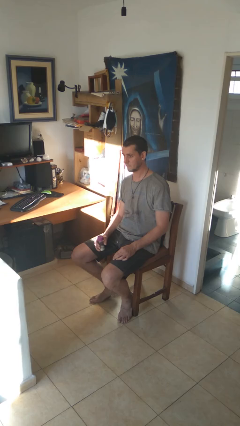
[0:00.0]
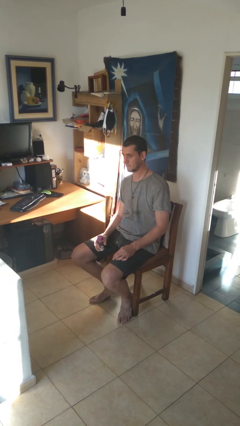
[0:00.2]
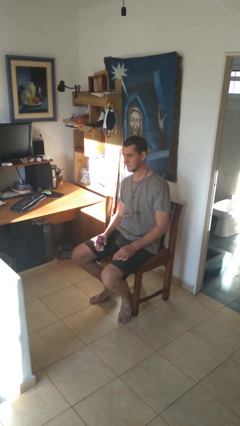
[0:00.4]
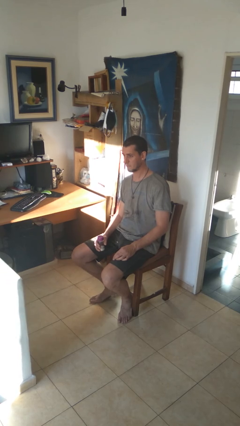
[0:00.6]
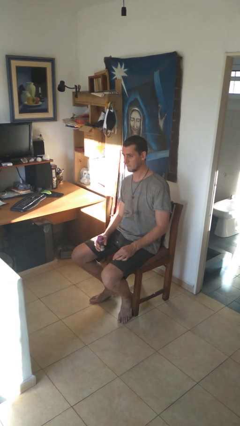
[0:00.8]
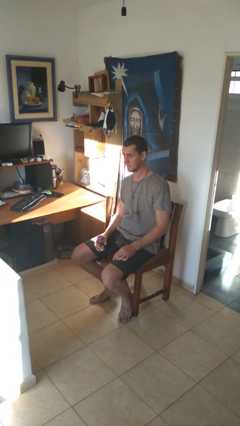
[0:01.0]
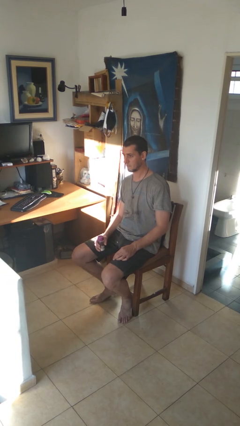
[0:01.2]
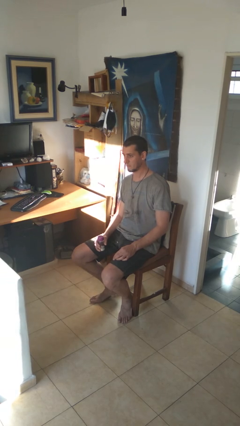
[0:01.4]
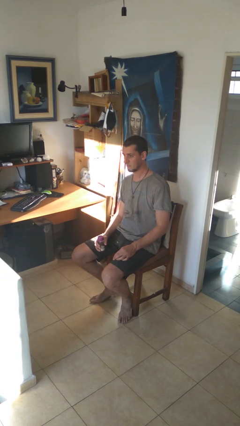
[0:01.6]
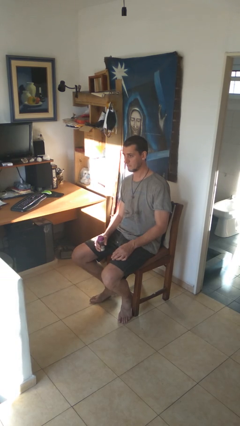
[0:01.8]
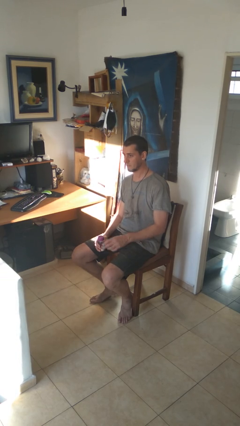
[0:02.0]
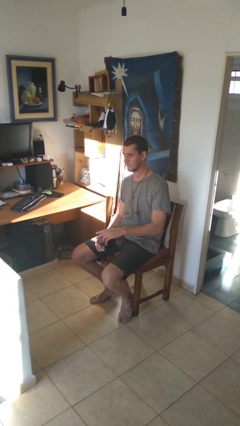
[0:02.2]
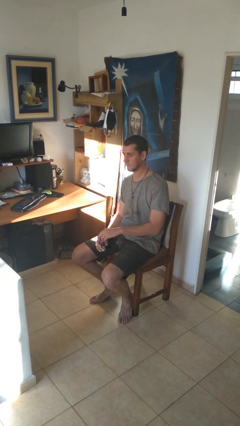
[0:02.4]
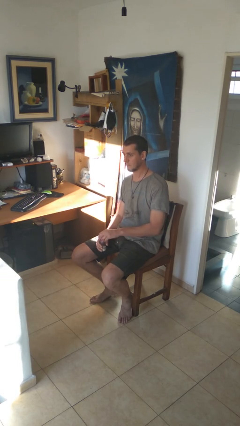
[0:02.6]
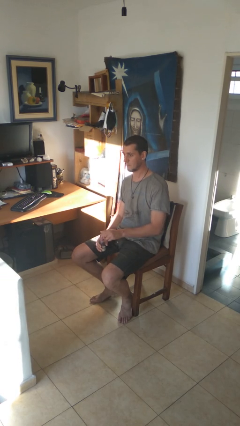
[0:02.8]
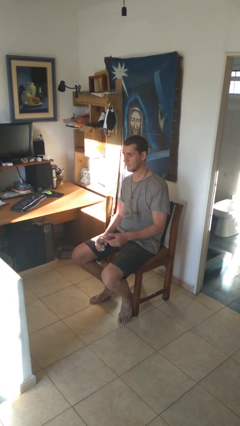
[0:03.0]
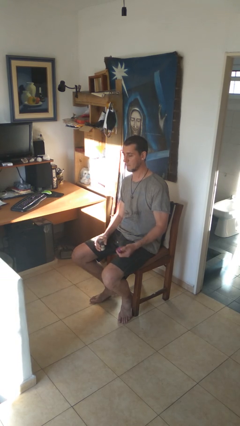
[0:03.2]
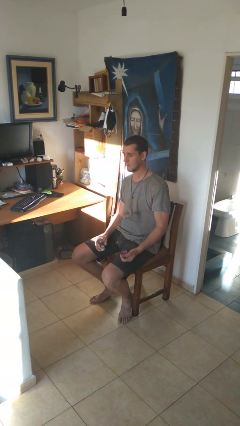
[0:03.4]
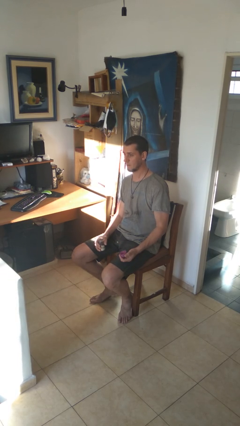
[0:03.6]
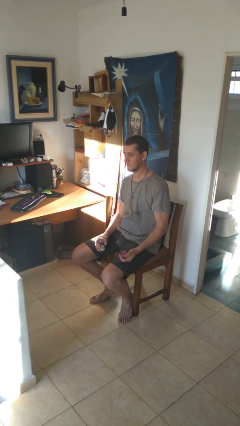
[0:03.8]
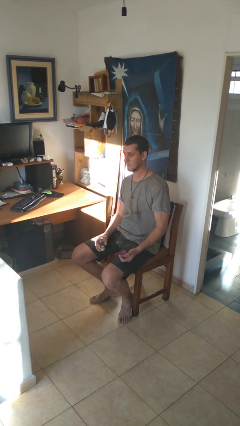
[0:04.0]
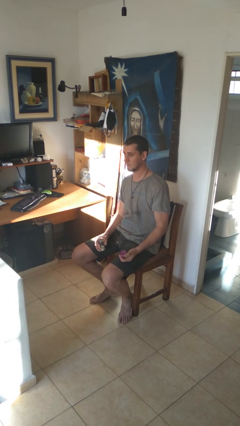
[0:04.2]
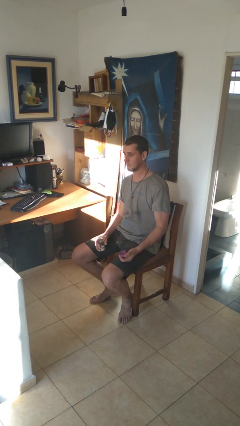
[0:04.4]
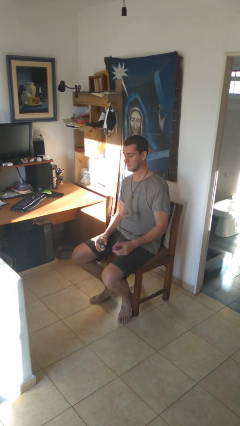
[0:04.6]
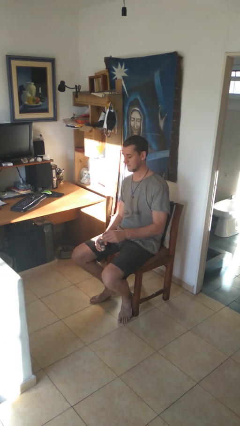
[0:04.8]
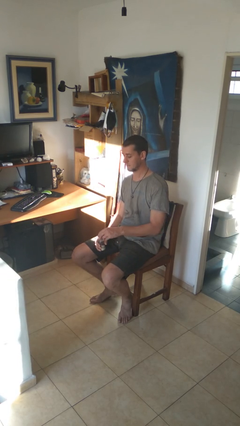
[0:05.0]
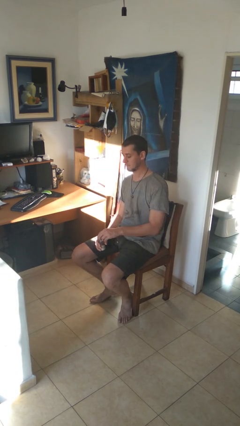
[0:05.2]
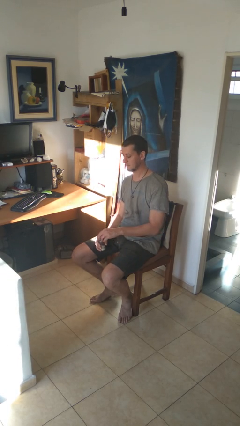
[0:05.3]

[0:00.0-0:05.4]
person opens jar

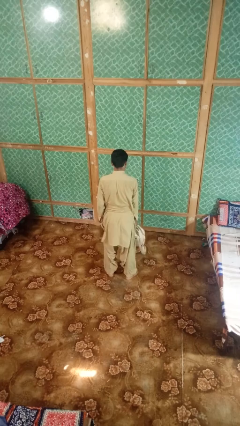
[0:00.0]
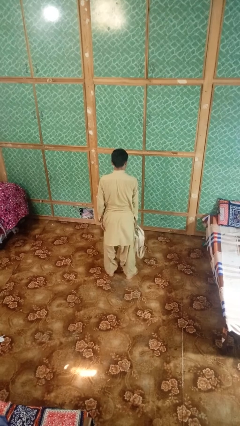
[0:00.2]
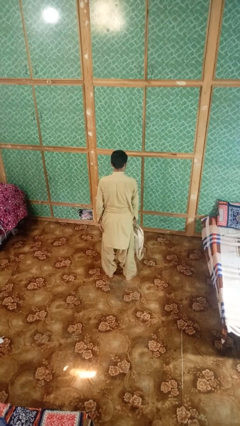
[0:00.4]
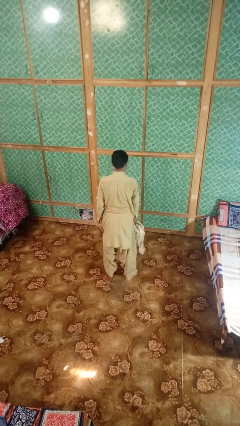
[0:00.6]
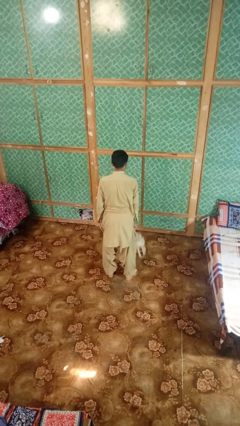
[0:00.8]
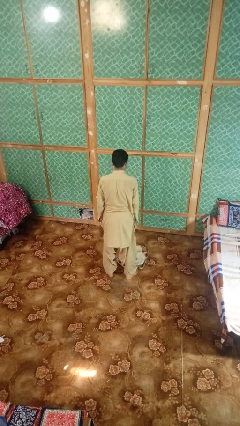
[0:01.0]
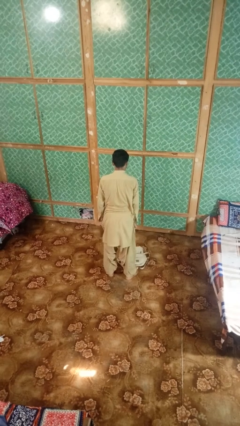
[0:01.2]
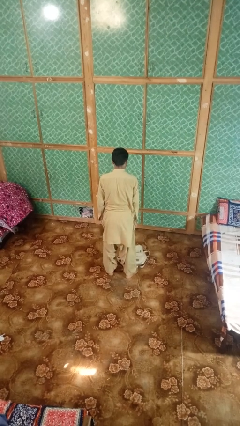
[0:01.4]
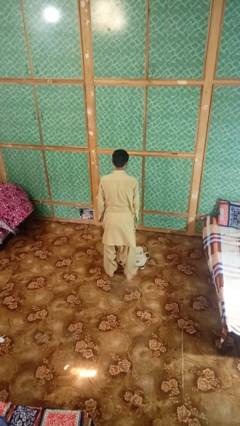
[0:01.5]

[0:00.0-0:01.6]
person throws object to ground

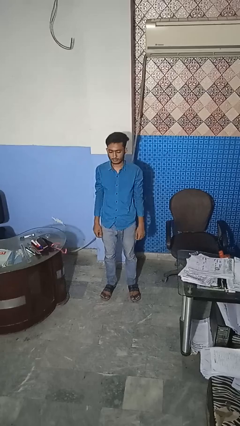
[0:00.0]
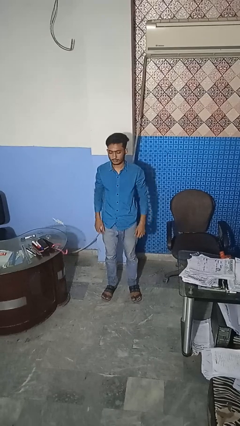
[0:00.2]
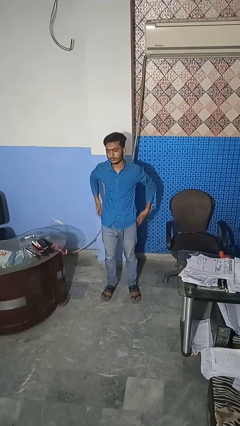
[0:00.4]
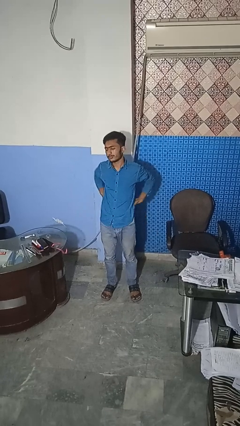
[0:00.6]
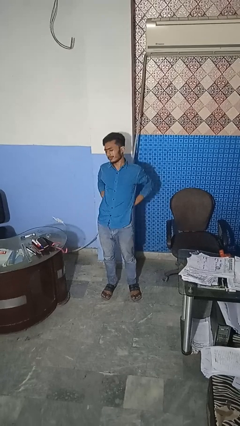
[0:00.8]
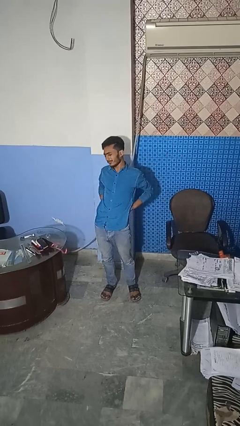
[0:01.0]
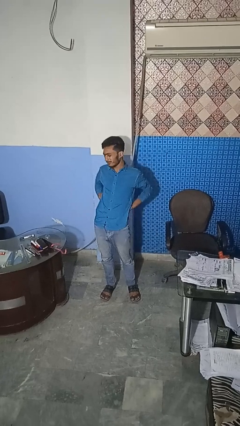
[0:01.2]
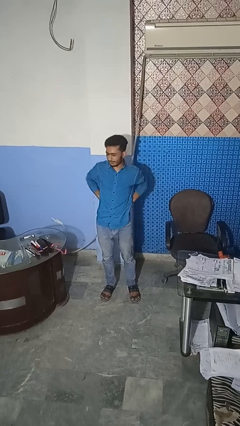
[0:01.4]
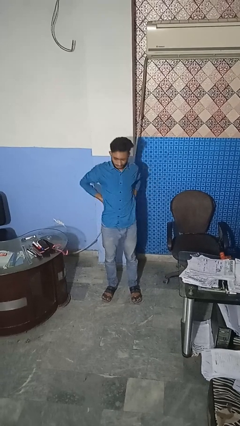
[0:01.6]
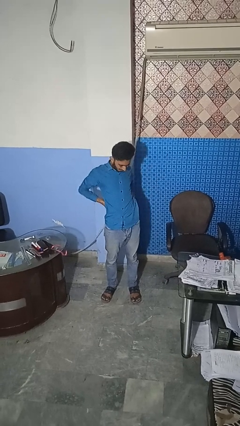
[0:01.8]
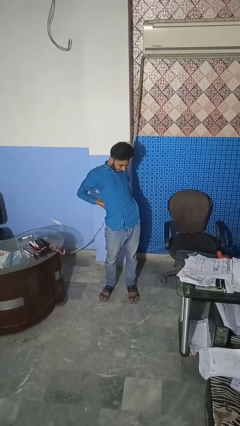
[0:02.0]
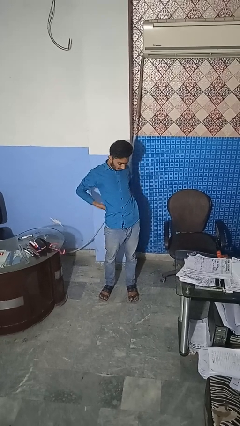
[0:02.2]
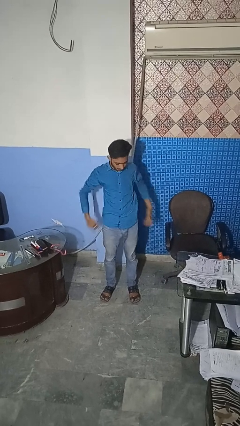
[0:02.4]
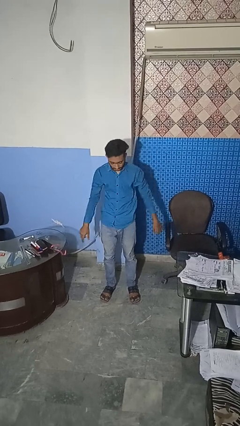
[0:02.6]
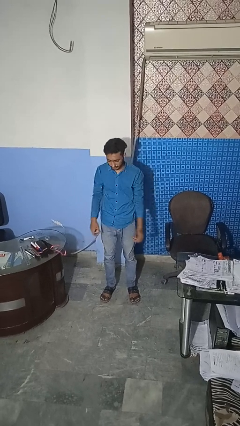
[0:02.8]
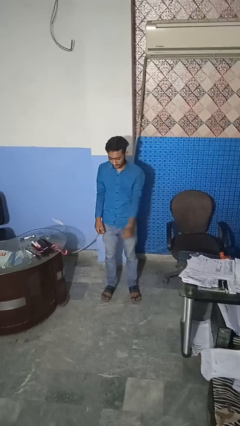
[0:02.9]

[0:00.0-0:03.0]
person stretches back

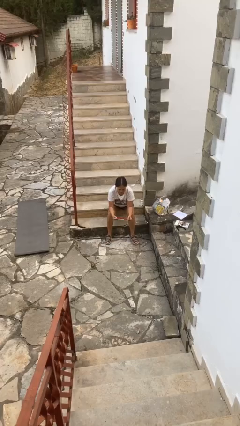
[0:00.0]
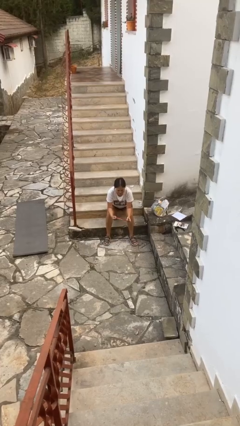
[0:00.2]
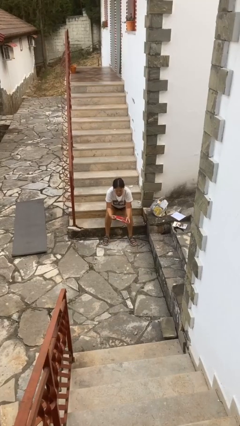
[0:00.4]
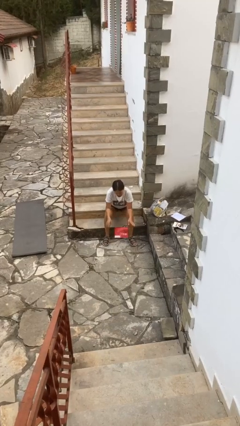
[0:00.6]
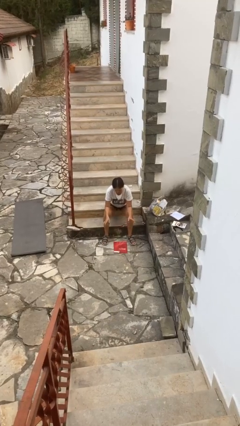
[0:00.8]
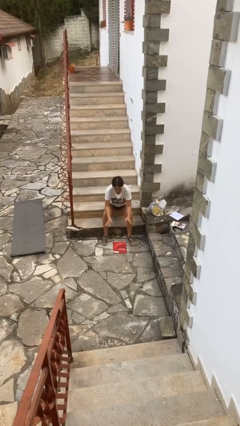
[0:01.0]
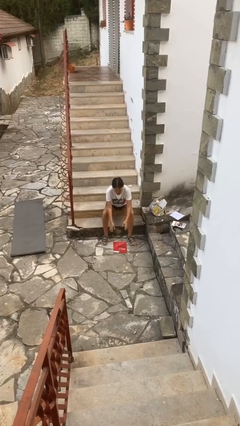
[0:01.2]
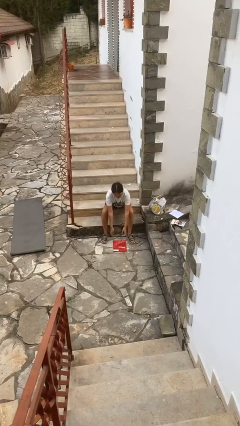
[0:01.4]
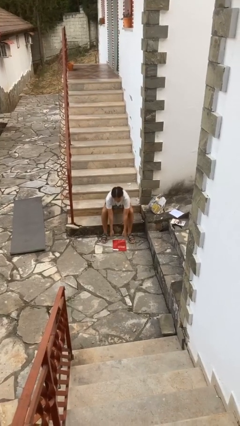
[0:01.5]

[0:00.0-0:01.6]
person drops object

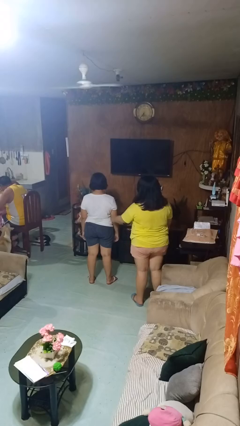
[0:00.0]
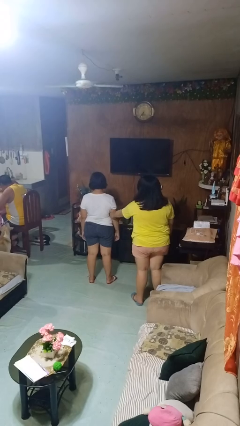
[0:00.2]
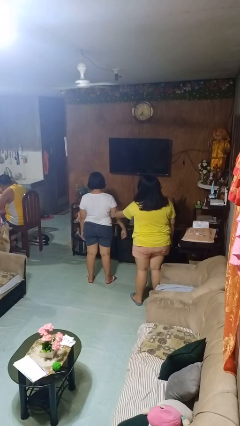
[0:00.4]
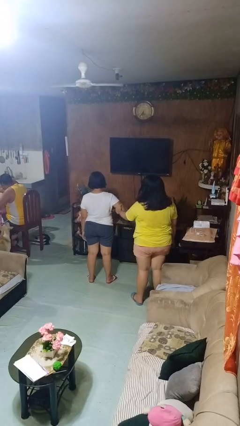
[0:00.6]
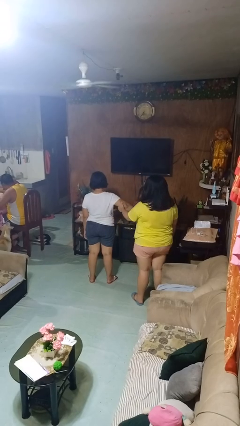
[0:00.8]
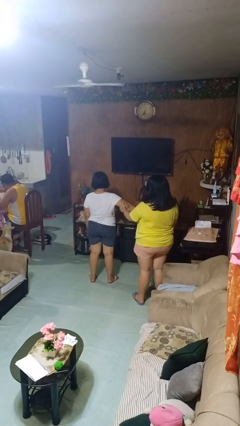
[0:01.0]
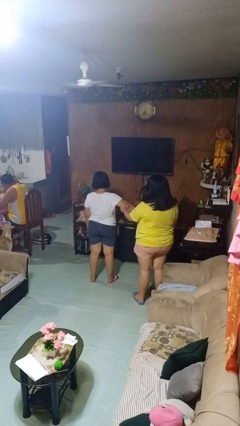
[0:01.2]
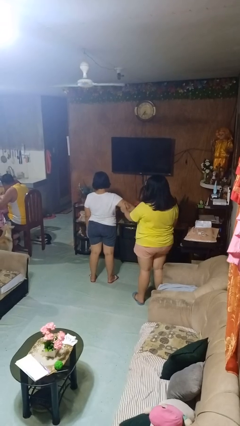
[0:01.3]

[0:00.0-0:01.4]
person grabs person by bicep

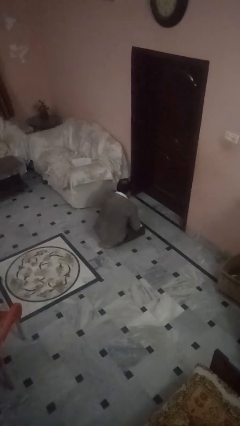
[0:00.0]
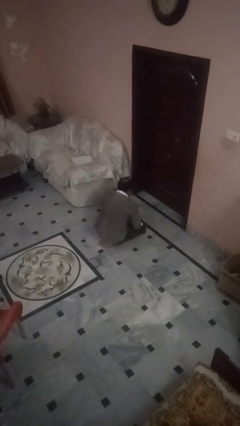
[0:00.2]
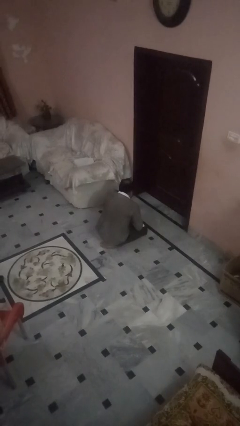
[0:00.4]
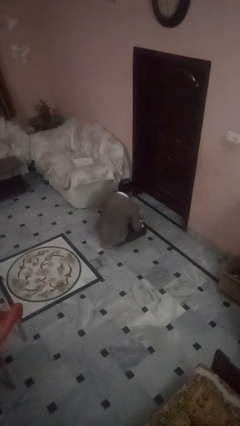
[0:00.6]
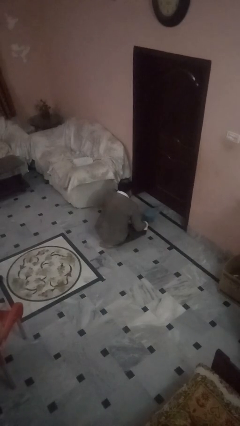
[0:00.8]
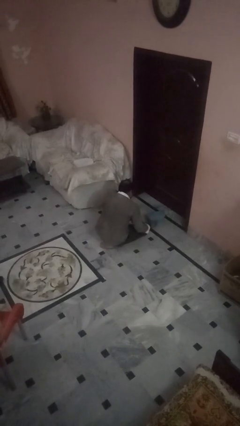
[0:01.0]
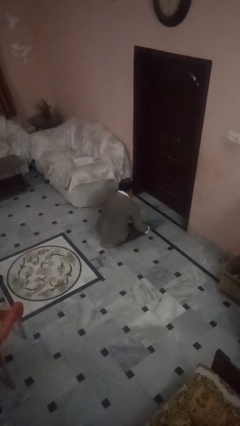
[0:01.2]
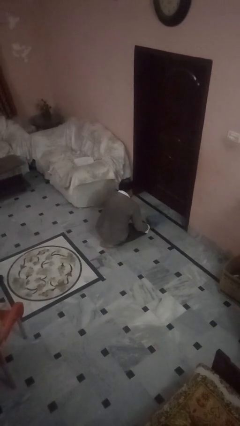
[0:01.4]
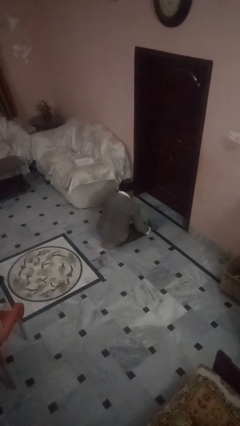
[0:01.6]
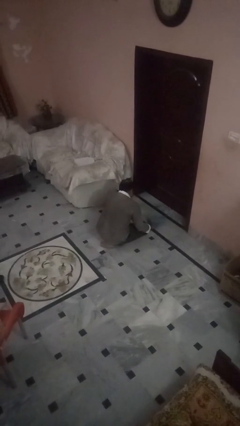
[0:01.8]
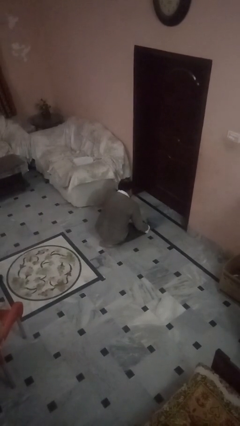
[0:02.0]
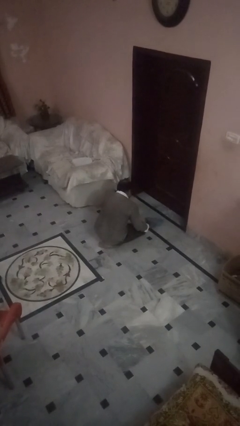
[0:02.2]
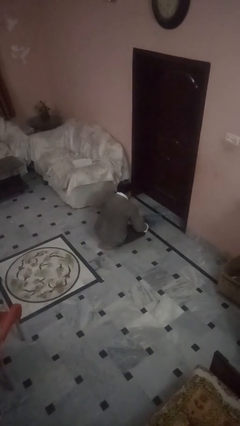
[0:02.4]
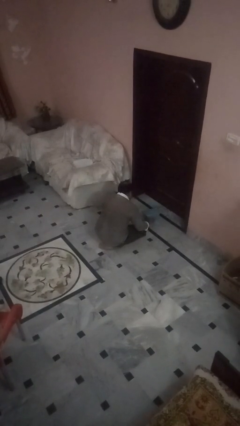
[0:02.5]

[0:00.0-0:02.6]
person swats bug
